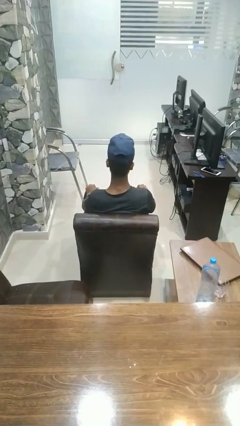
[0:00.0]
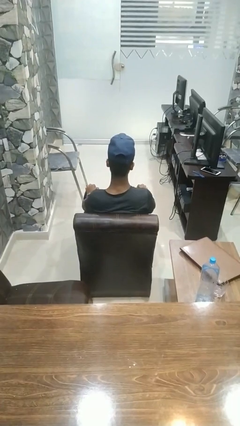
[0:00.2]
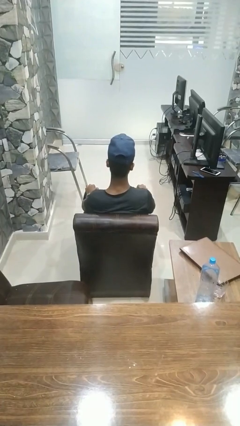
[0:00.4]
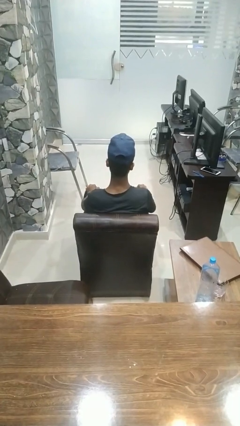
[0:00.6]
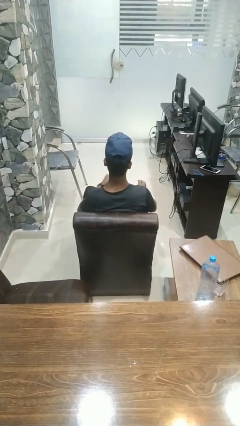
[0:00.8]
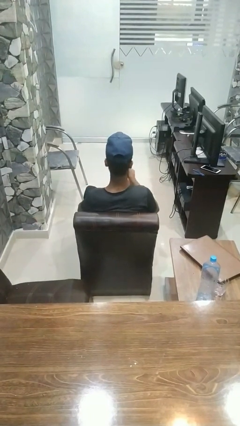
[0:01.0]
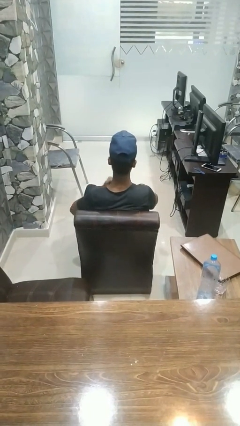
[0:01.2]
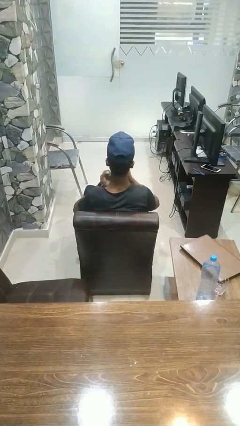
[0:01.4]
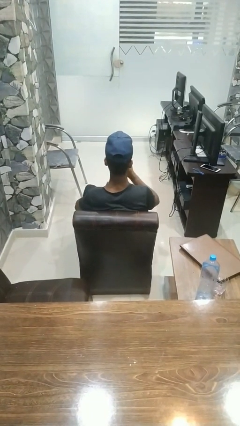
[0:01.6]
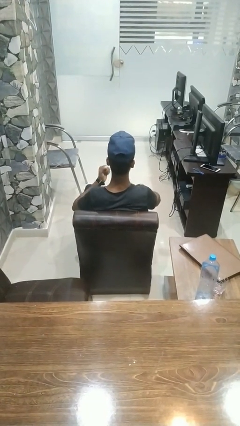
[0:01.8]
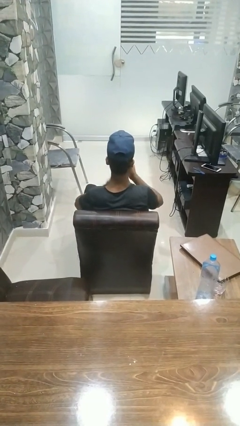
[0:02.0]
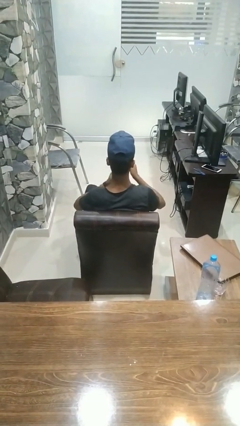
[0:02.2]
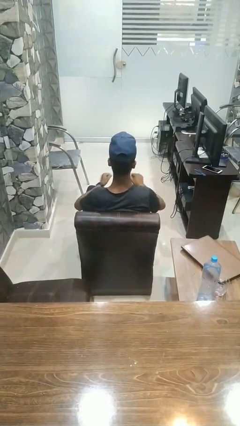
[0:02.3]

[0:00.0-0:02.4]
person drums on chest

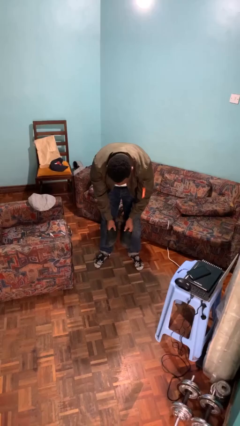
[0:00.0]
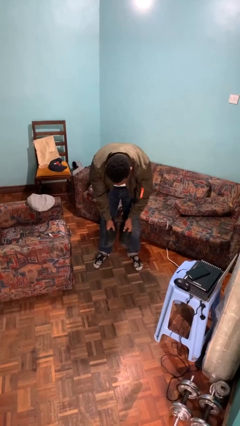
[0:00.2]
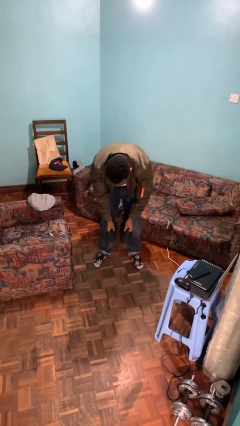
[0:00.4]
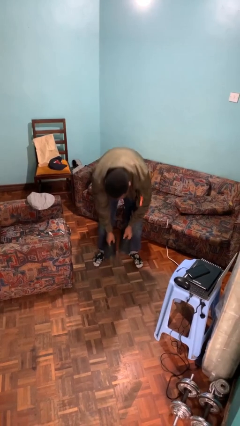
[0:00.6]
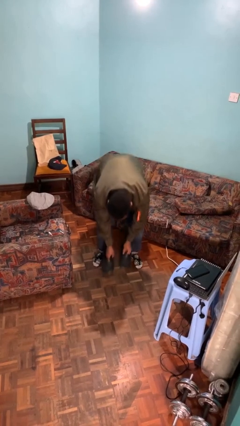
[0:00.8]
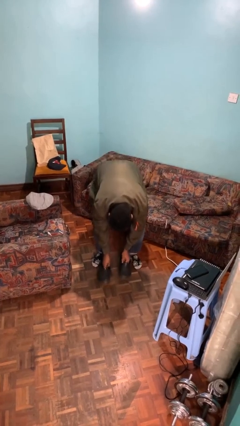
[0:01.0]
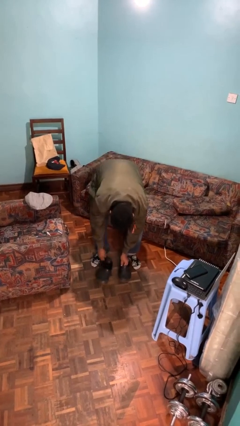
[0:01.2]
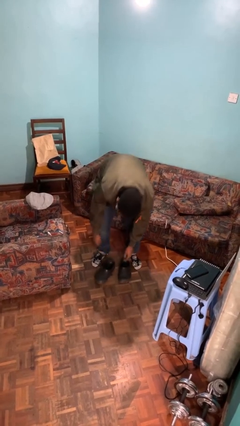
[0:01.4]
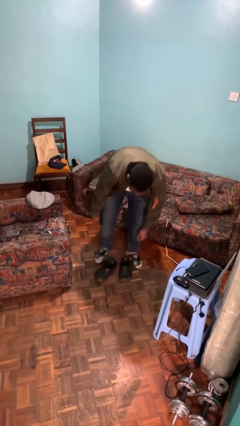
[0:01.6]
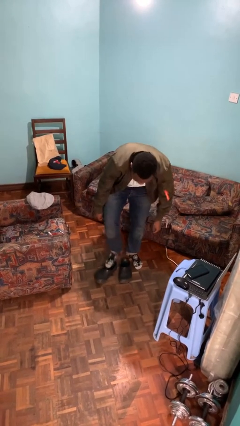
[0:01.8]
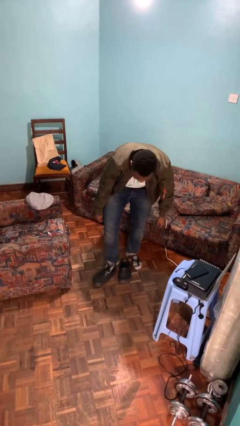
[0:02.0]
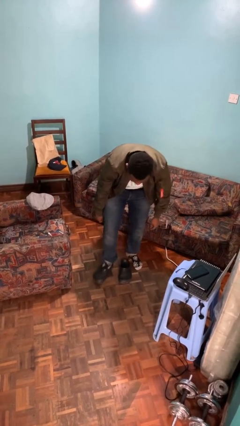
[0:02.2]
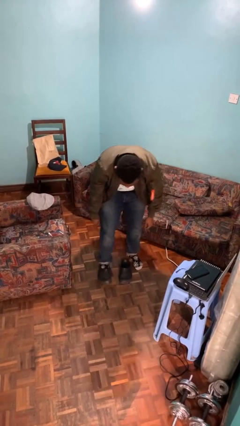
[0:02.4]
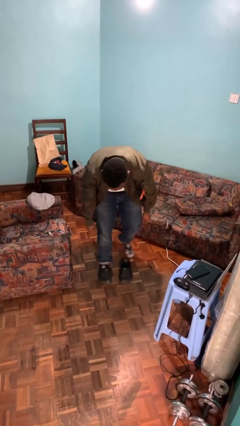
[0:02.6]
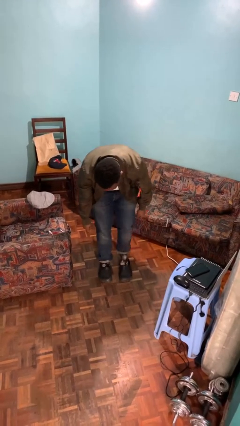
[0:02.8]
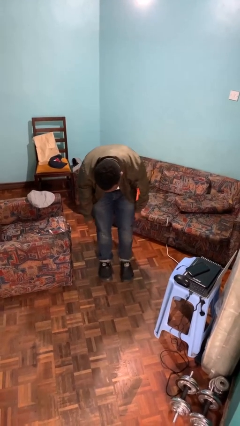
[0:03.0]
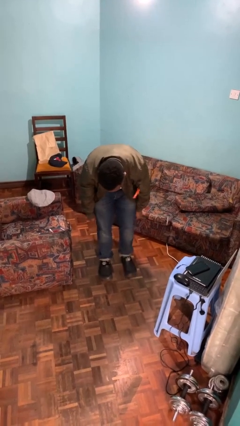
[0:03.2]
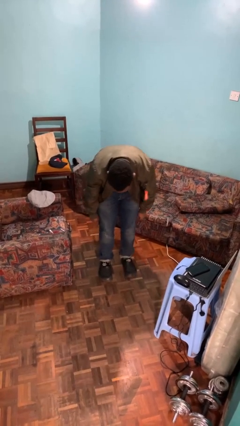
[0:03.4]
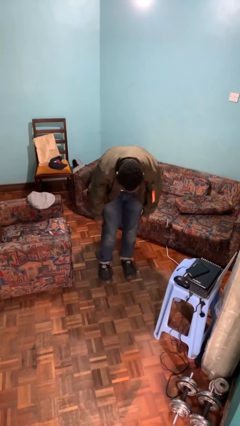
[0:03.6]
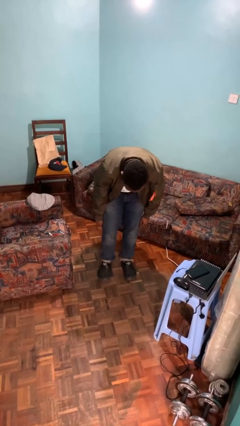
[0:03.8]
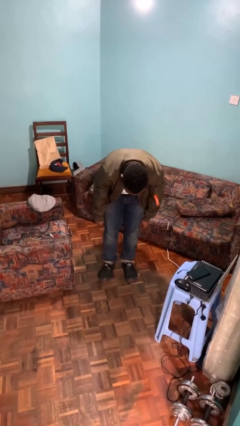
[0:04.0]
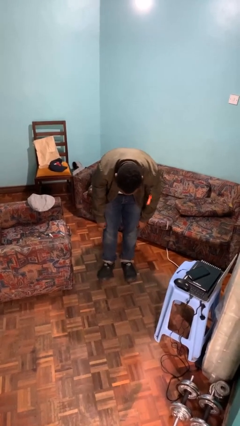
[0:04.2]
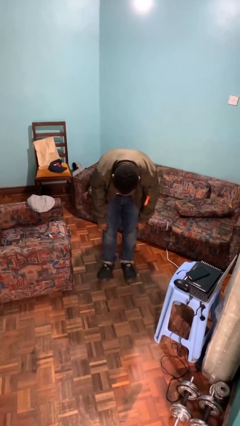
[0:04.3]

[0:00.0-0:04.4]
person puts on shoes

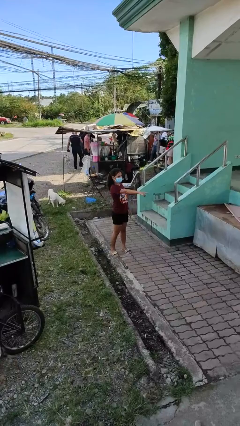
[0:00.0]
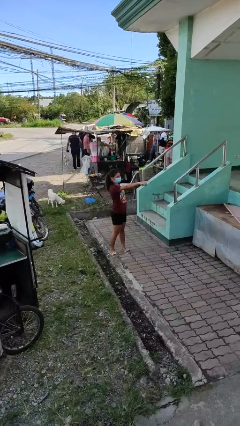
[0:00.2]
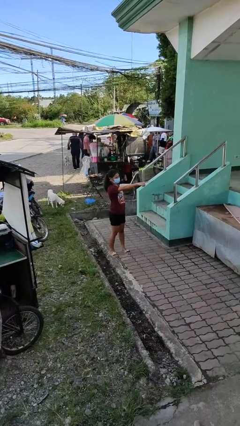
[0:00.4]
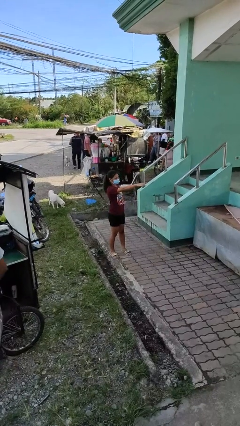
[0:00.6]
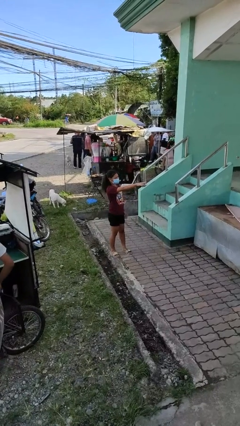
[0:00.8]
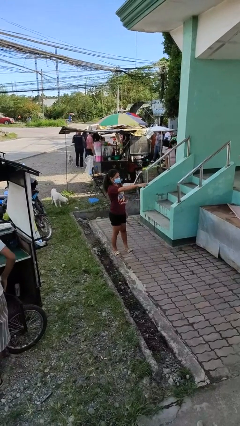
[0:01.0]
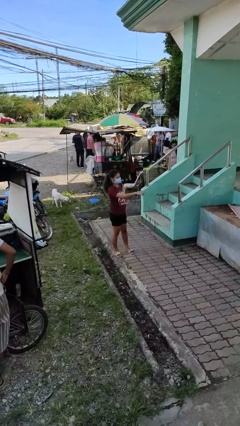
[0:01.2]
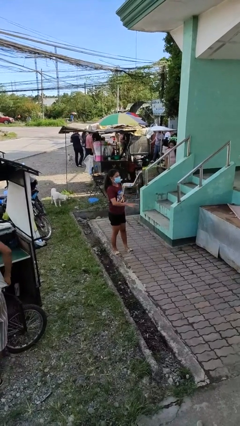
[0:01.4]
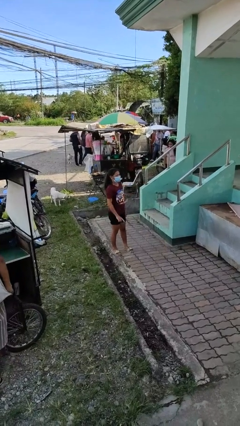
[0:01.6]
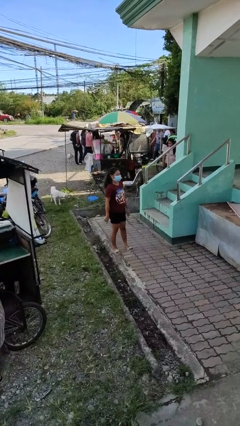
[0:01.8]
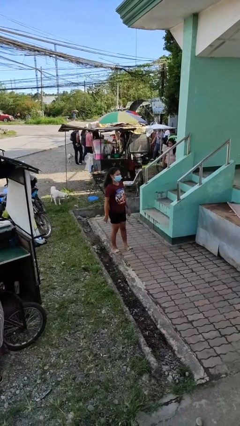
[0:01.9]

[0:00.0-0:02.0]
person points at person

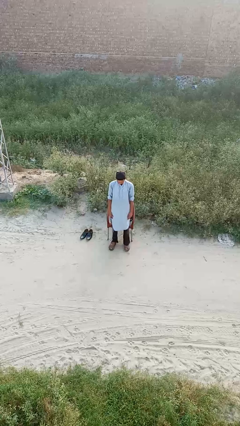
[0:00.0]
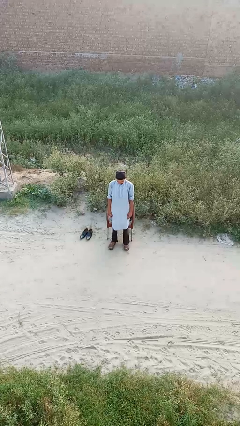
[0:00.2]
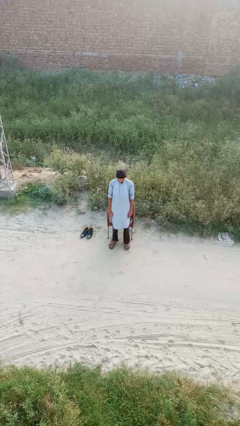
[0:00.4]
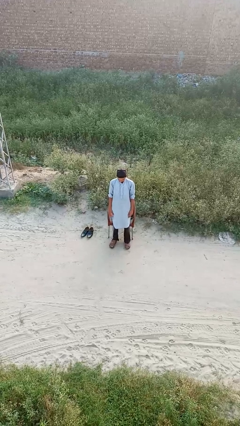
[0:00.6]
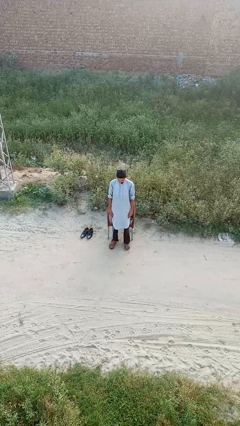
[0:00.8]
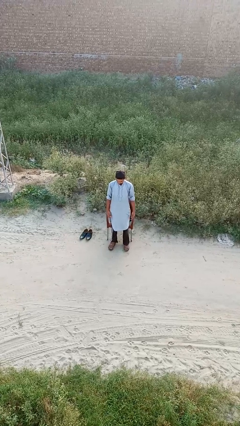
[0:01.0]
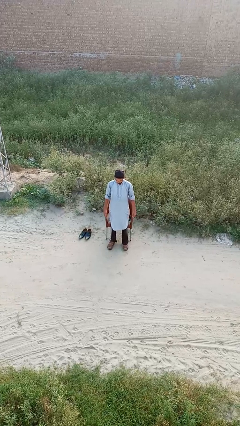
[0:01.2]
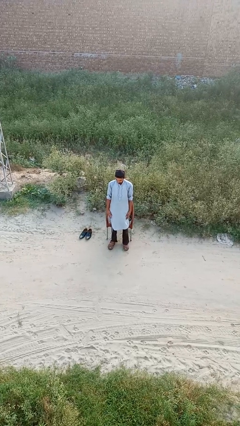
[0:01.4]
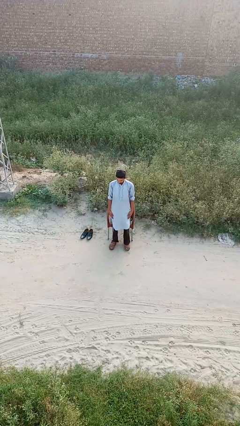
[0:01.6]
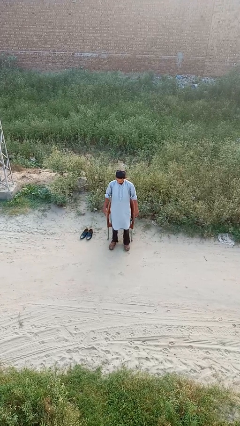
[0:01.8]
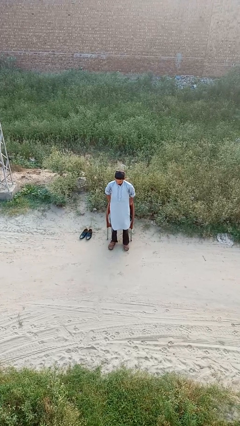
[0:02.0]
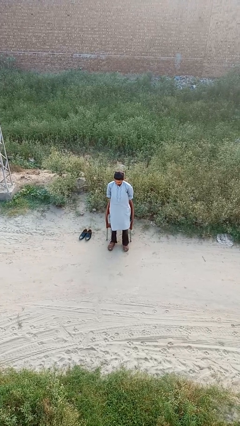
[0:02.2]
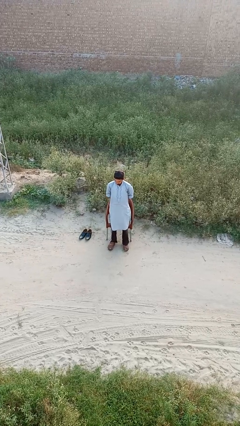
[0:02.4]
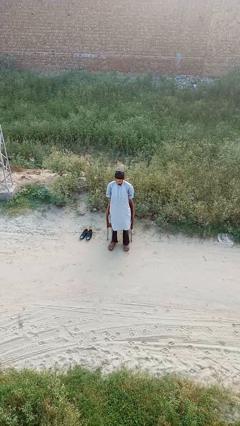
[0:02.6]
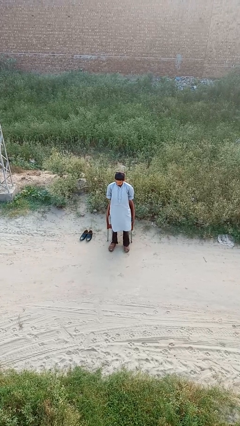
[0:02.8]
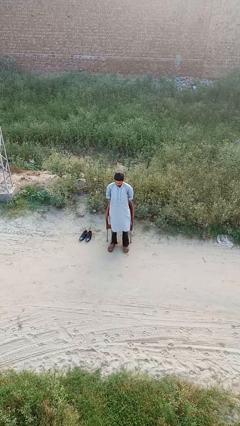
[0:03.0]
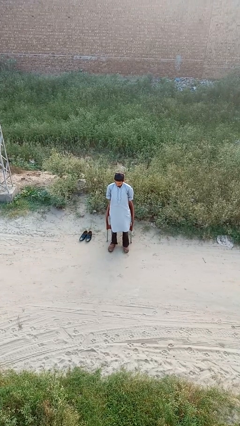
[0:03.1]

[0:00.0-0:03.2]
person stretches back

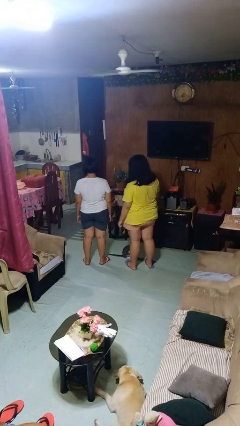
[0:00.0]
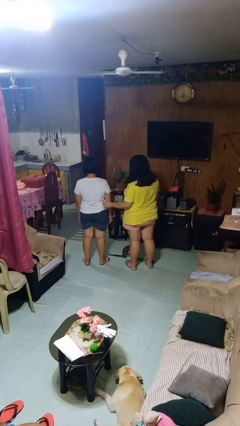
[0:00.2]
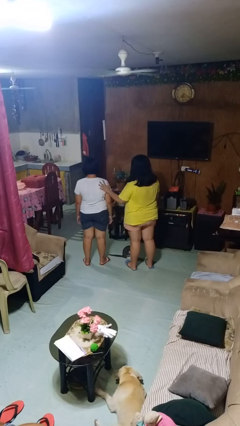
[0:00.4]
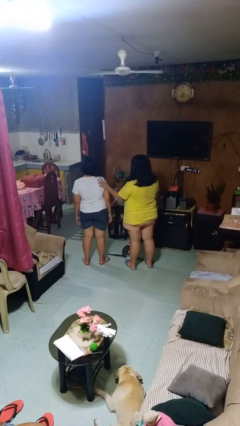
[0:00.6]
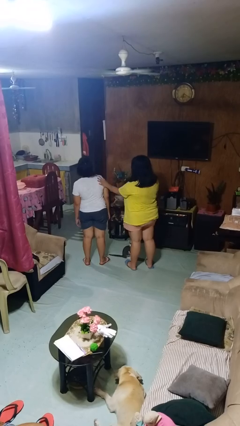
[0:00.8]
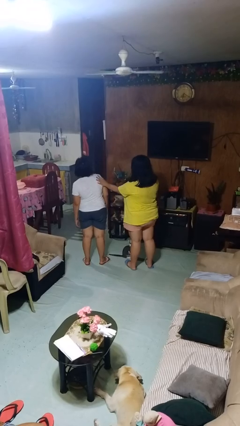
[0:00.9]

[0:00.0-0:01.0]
person shoves person

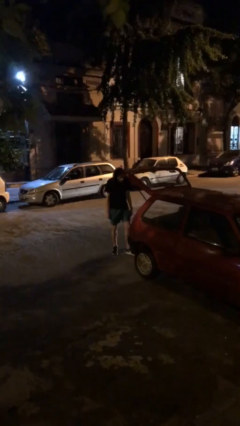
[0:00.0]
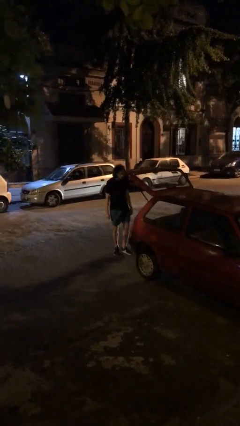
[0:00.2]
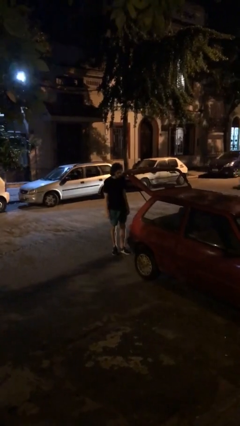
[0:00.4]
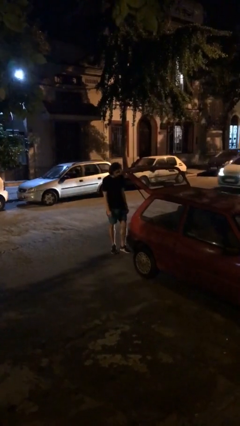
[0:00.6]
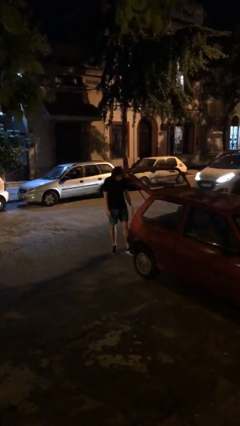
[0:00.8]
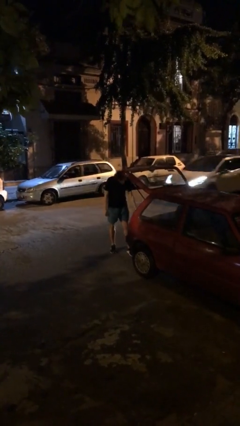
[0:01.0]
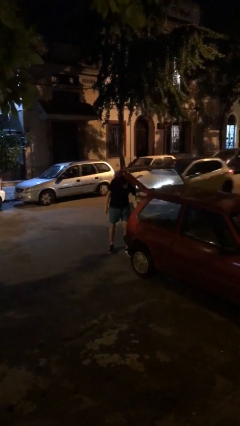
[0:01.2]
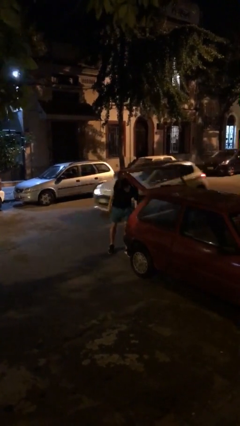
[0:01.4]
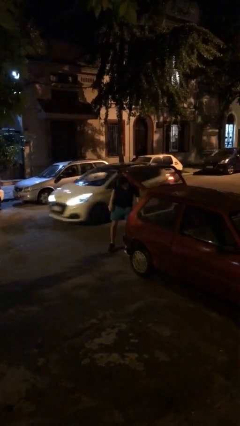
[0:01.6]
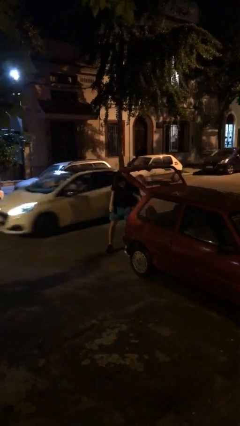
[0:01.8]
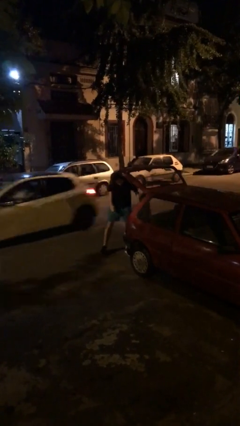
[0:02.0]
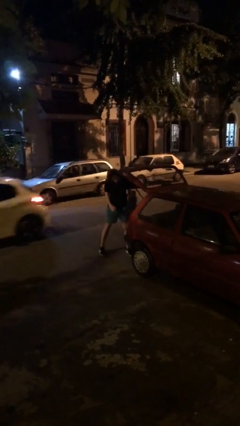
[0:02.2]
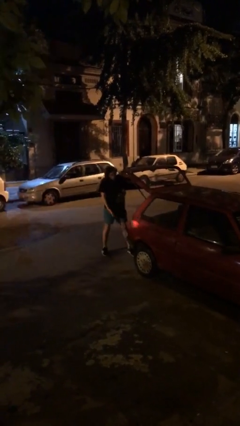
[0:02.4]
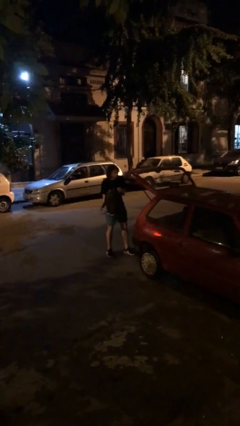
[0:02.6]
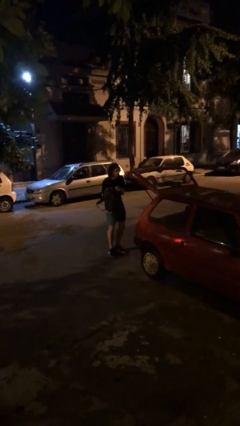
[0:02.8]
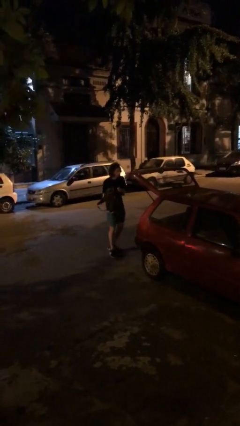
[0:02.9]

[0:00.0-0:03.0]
person unloads car

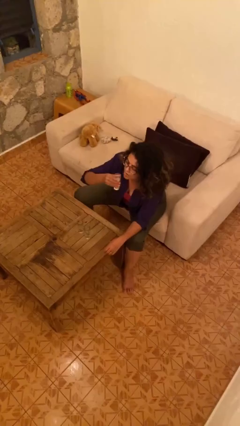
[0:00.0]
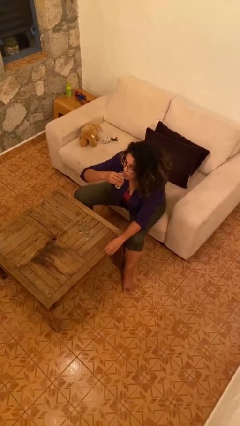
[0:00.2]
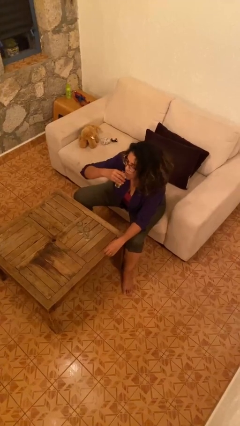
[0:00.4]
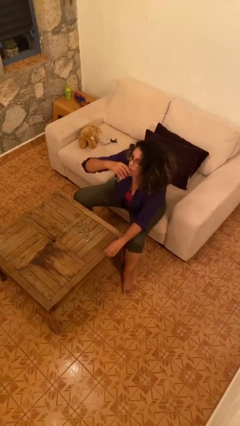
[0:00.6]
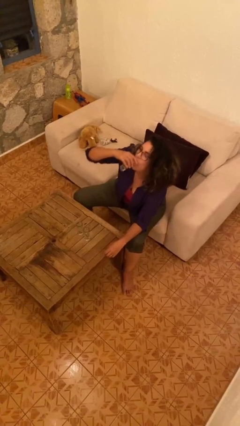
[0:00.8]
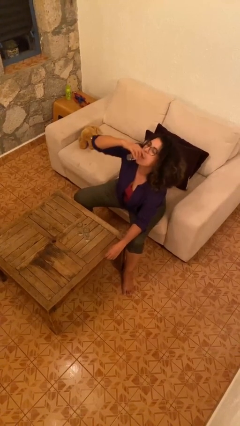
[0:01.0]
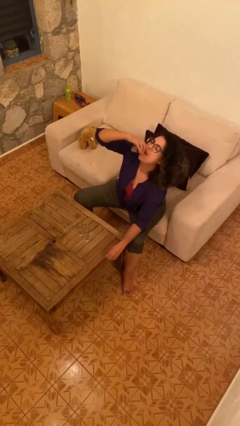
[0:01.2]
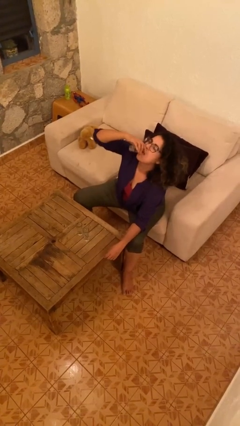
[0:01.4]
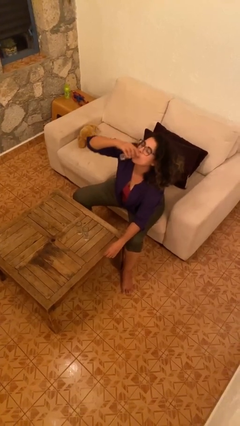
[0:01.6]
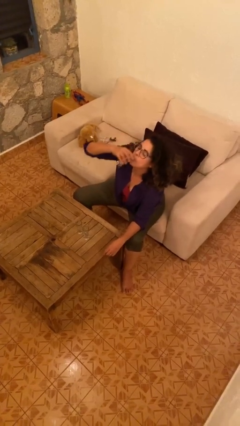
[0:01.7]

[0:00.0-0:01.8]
person drinks from shotglass
